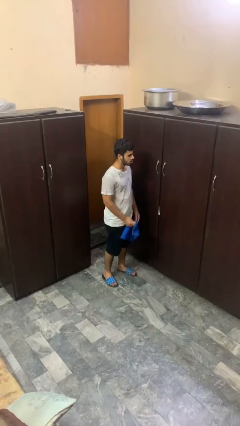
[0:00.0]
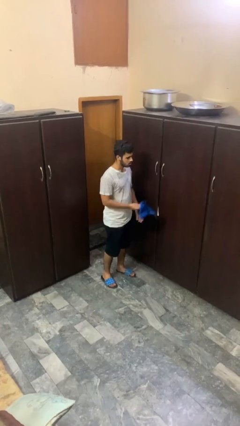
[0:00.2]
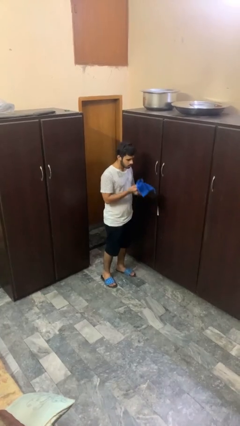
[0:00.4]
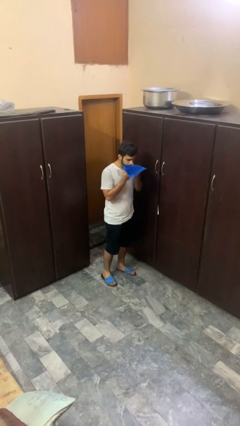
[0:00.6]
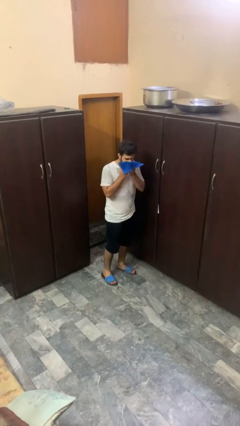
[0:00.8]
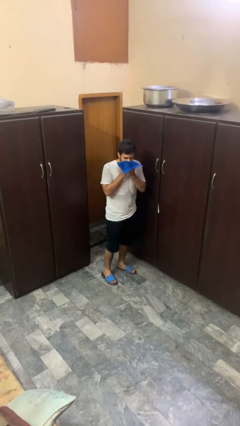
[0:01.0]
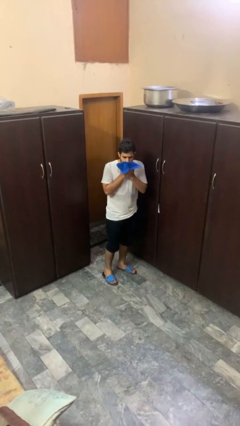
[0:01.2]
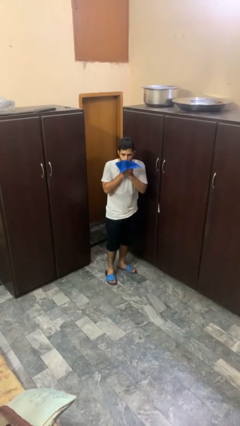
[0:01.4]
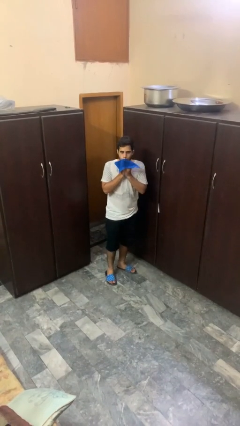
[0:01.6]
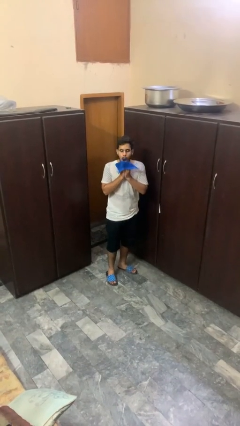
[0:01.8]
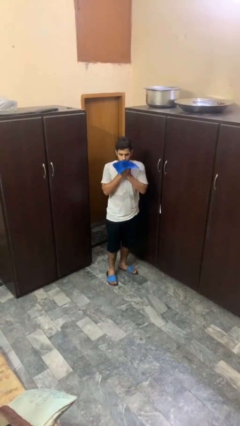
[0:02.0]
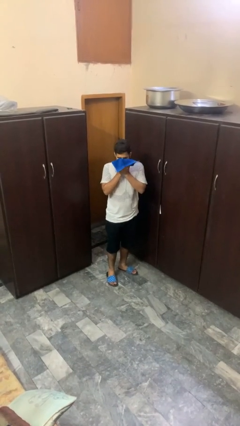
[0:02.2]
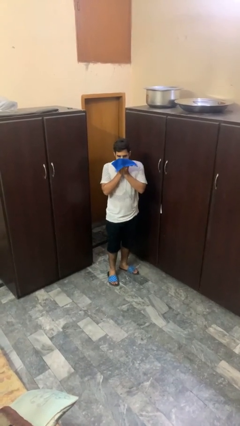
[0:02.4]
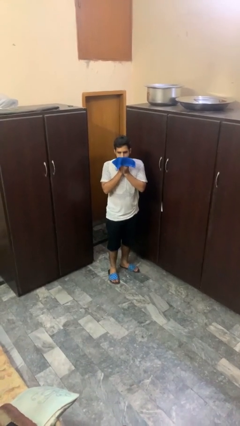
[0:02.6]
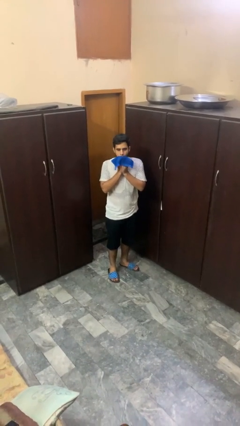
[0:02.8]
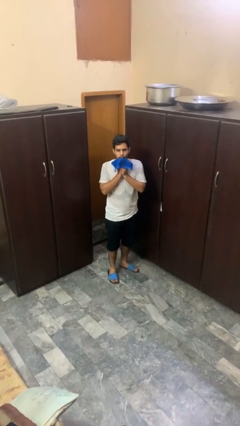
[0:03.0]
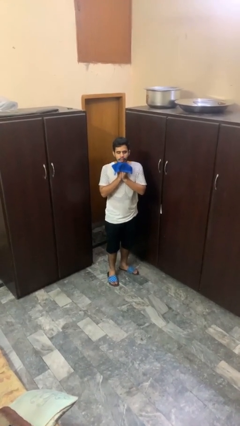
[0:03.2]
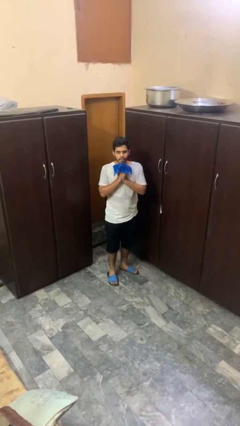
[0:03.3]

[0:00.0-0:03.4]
person wipes mouth with napkin

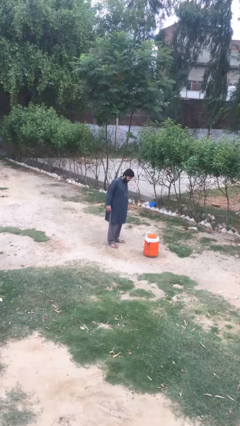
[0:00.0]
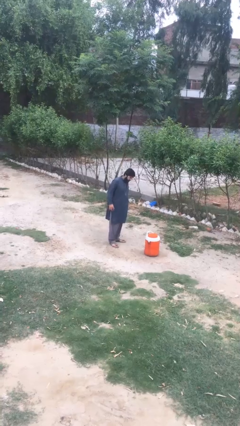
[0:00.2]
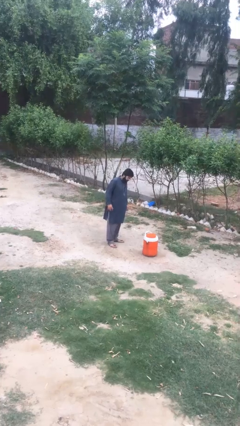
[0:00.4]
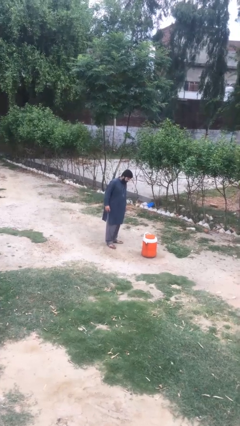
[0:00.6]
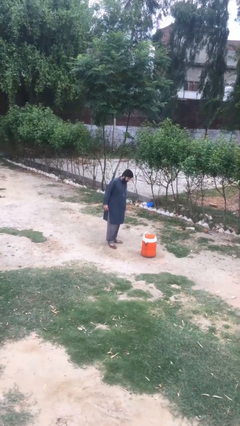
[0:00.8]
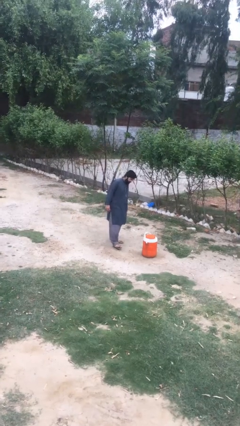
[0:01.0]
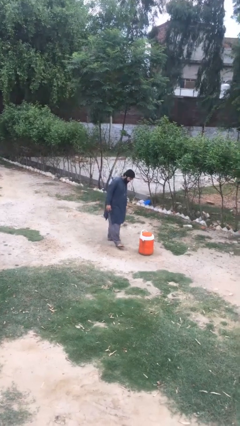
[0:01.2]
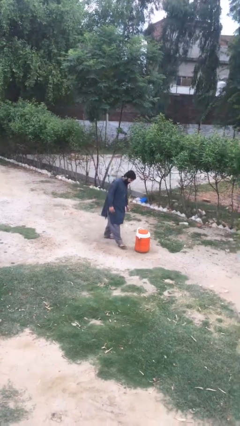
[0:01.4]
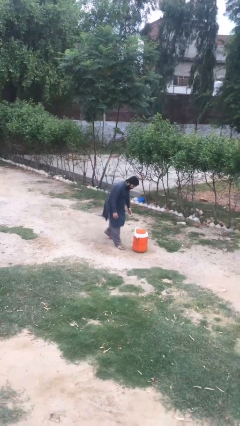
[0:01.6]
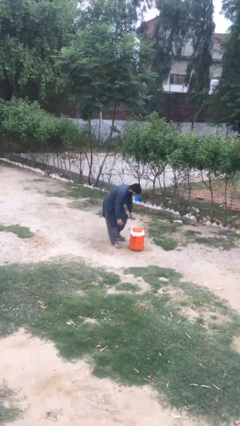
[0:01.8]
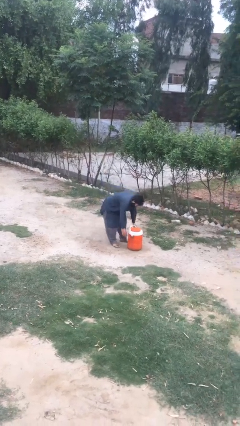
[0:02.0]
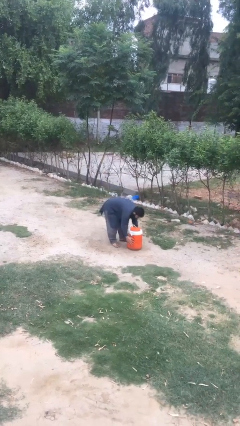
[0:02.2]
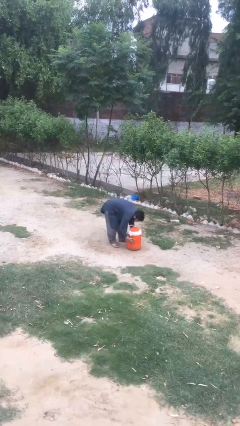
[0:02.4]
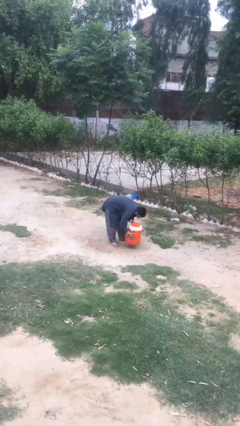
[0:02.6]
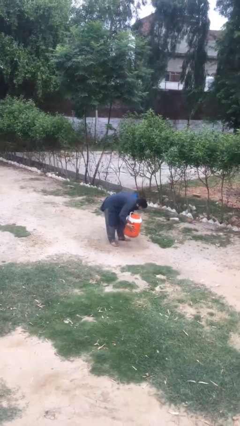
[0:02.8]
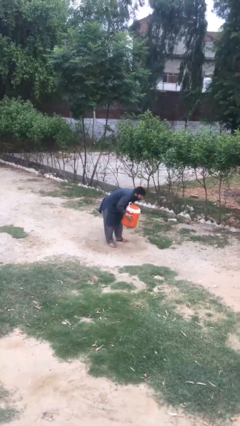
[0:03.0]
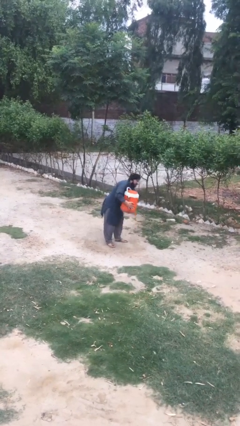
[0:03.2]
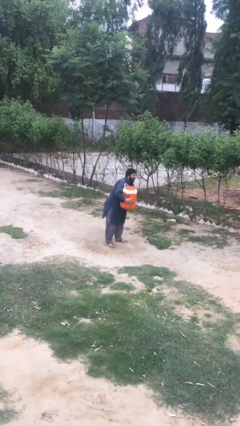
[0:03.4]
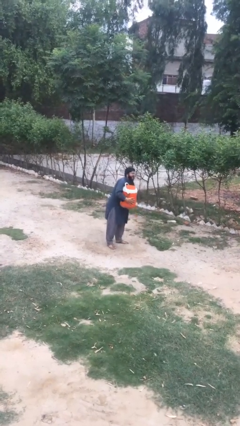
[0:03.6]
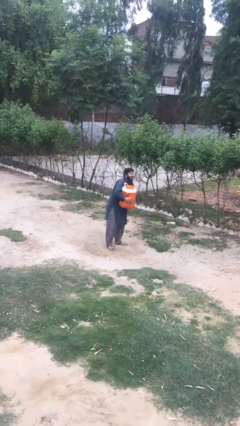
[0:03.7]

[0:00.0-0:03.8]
person picks up object from floor

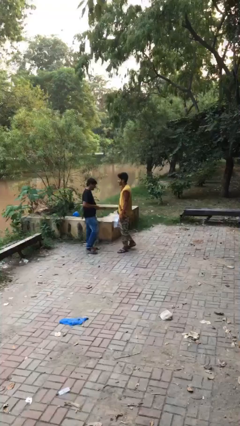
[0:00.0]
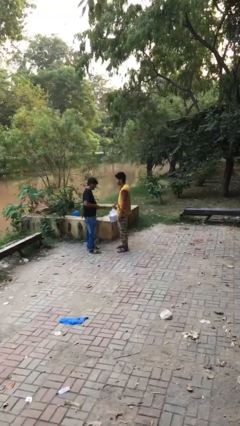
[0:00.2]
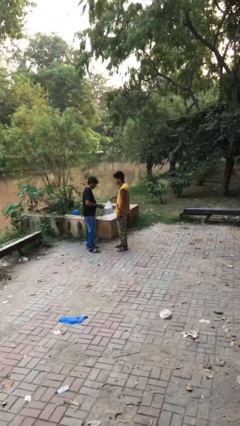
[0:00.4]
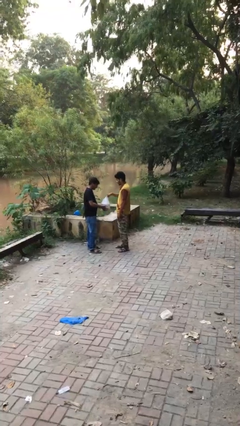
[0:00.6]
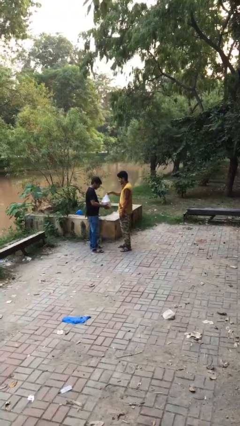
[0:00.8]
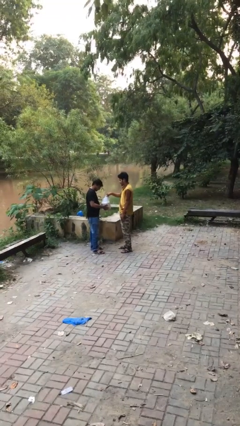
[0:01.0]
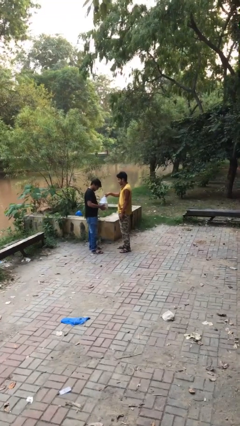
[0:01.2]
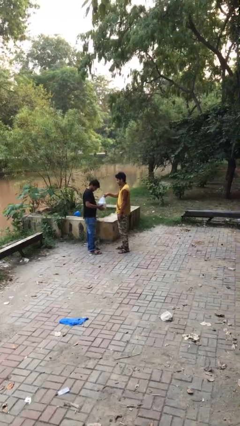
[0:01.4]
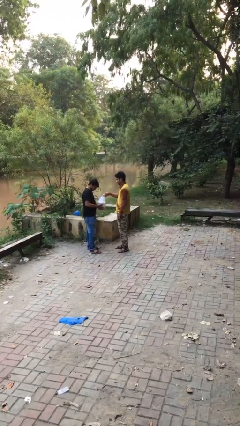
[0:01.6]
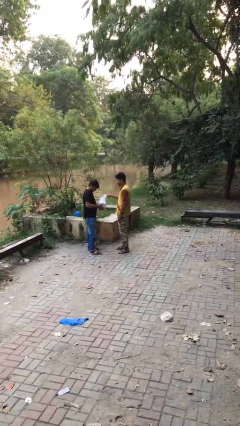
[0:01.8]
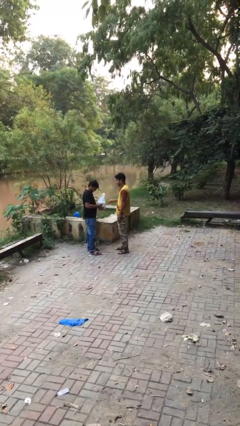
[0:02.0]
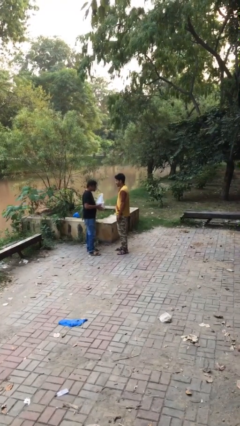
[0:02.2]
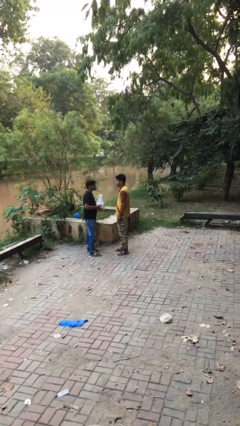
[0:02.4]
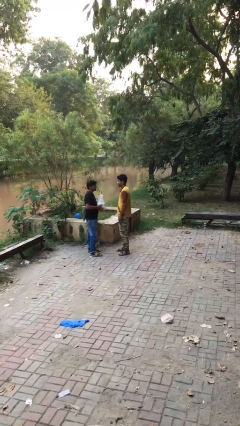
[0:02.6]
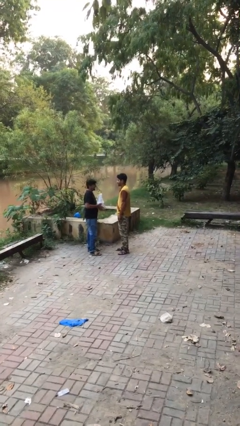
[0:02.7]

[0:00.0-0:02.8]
person transfers object to person

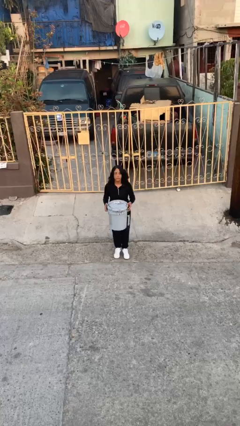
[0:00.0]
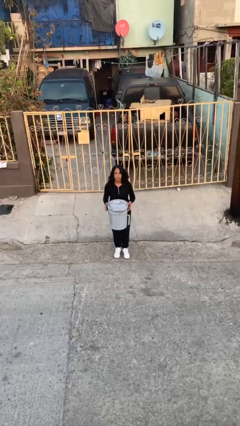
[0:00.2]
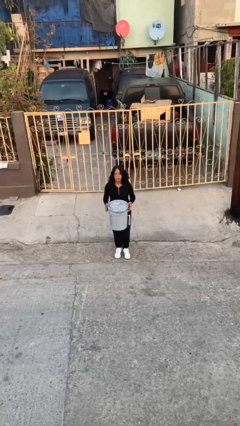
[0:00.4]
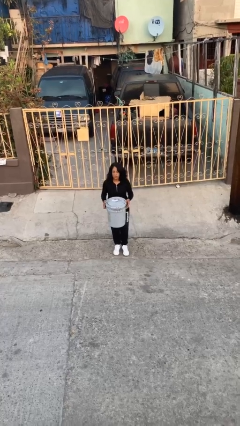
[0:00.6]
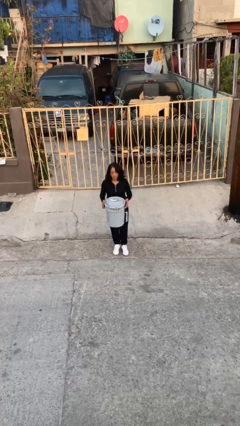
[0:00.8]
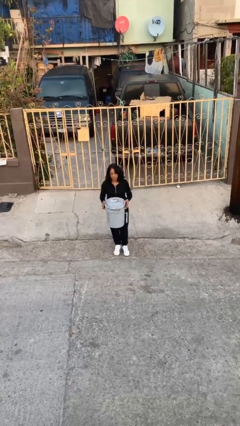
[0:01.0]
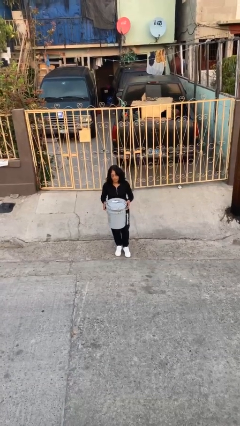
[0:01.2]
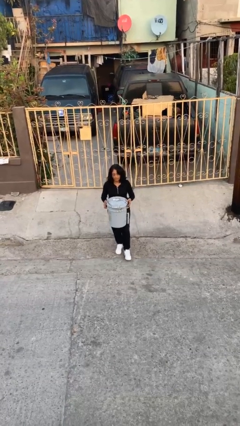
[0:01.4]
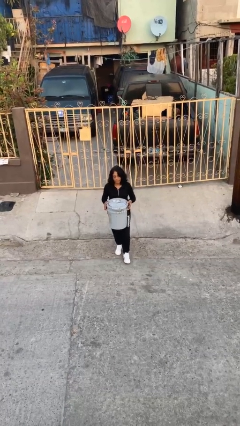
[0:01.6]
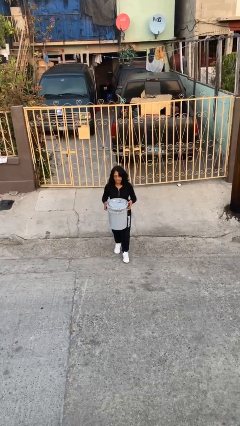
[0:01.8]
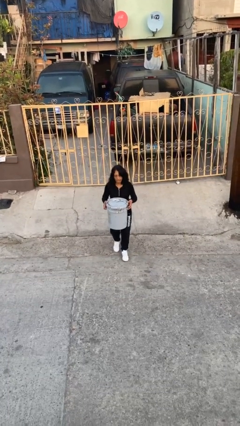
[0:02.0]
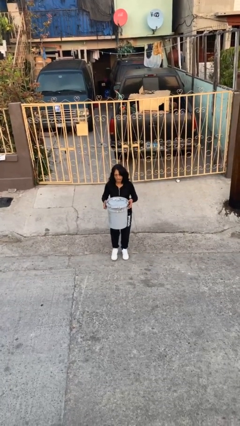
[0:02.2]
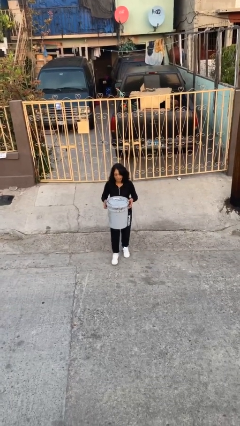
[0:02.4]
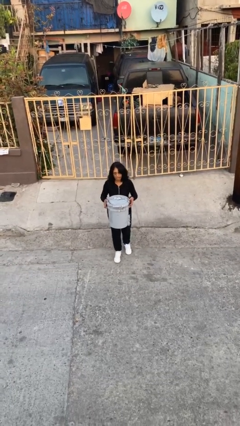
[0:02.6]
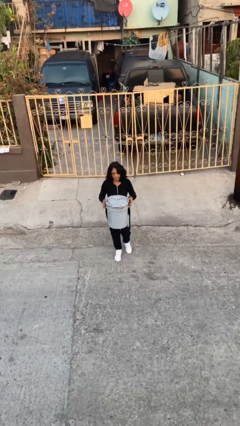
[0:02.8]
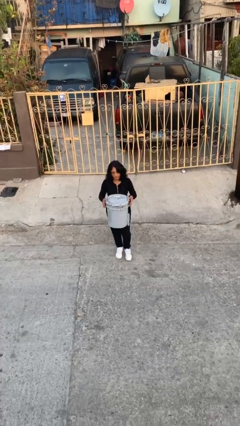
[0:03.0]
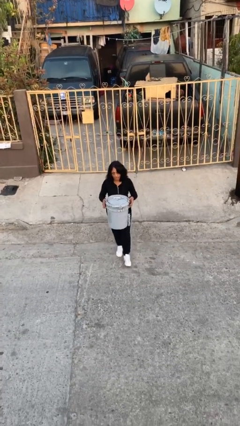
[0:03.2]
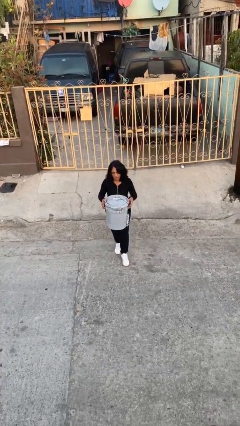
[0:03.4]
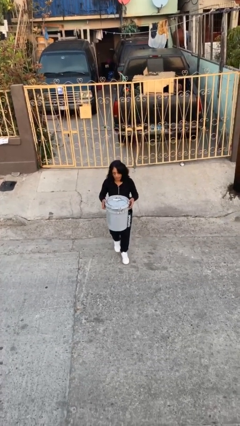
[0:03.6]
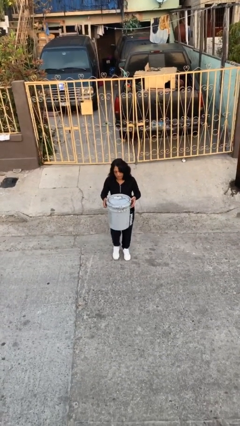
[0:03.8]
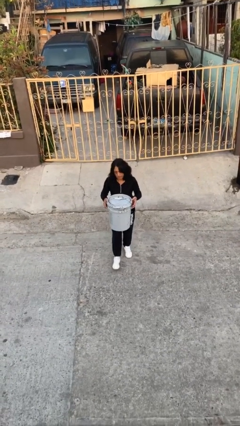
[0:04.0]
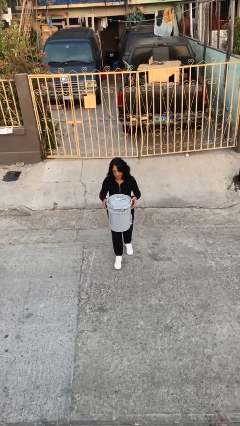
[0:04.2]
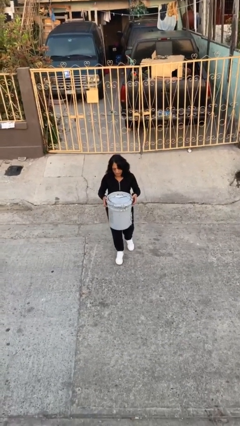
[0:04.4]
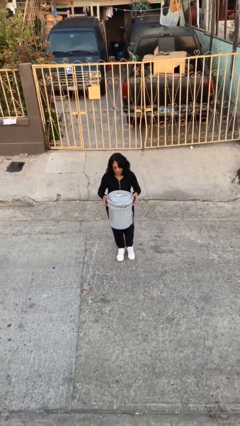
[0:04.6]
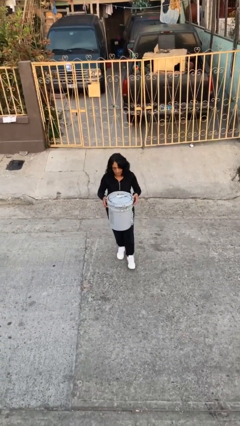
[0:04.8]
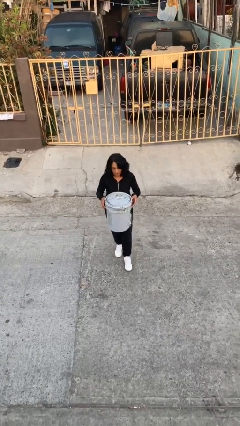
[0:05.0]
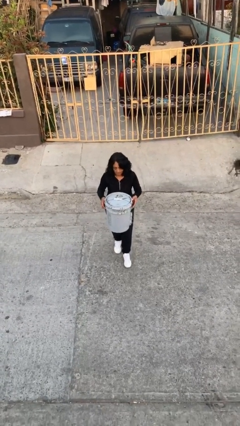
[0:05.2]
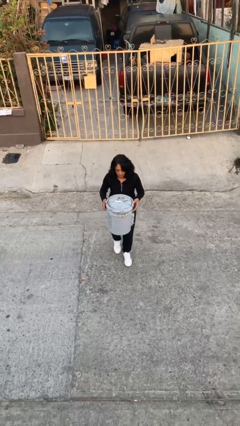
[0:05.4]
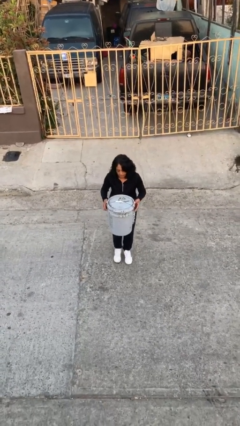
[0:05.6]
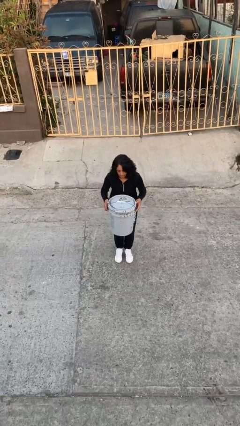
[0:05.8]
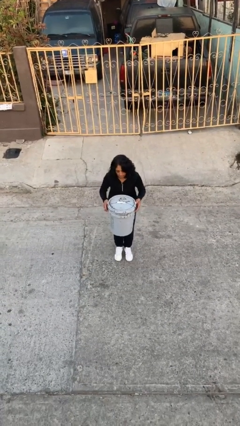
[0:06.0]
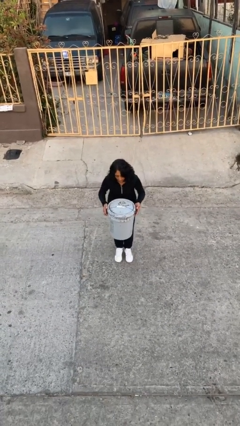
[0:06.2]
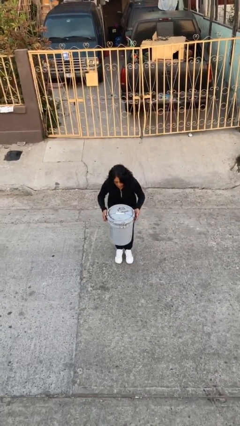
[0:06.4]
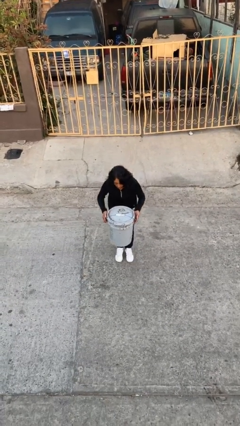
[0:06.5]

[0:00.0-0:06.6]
person carries heavy object

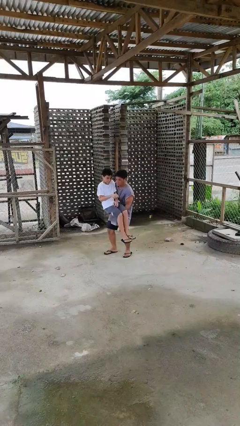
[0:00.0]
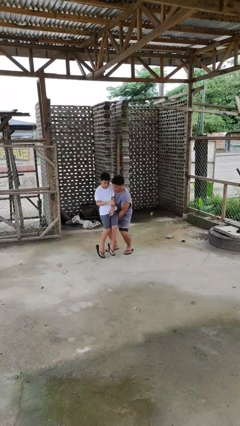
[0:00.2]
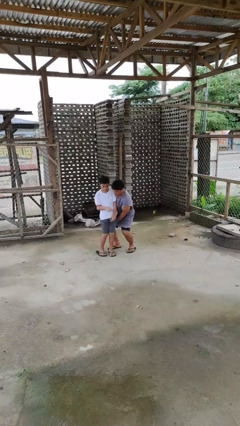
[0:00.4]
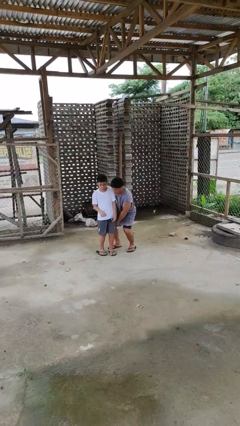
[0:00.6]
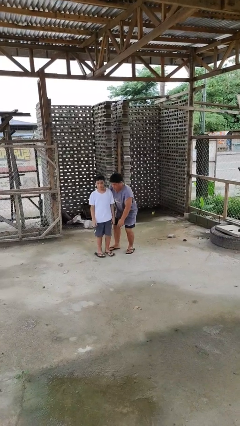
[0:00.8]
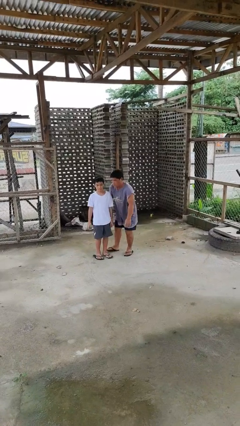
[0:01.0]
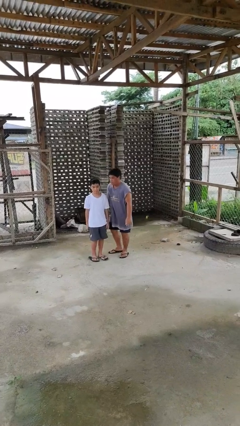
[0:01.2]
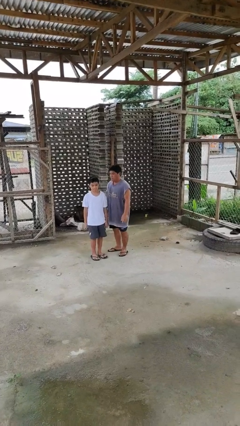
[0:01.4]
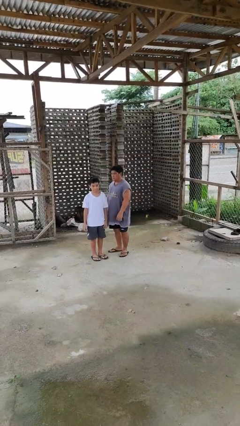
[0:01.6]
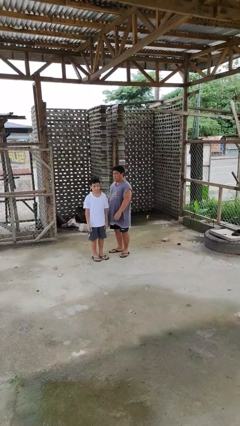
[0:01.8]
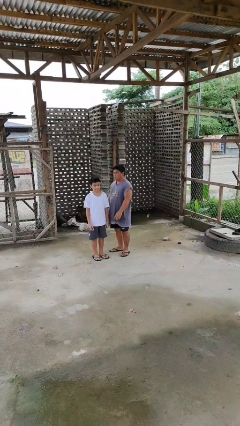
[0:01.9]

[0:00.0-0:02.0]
person puts down person
